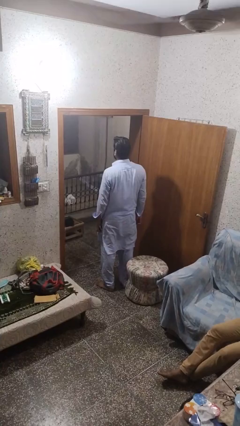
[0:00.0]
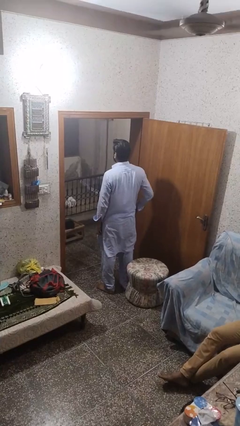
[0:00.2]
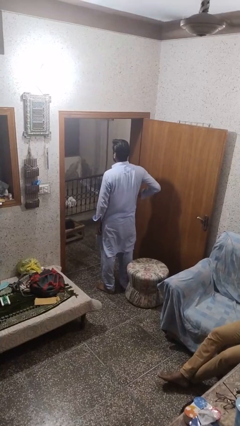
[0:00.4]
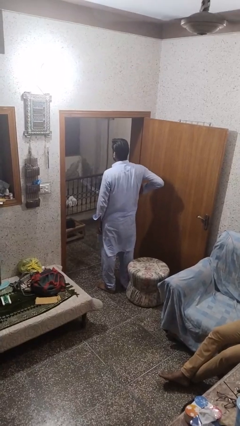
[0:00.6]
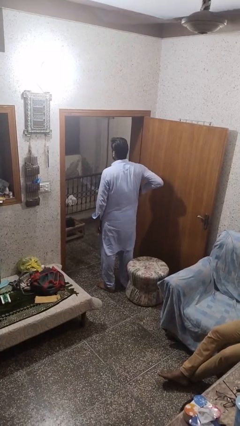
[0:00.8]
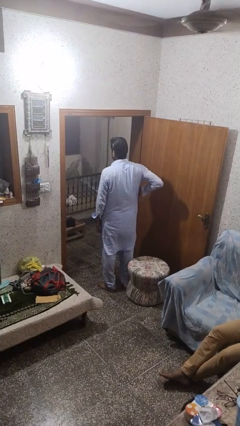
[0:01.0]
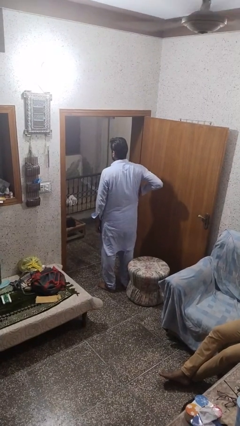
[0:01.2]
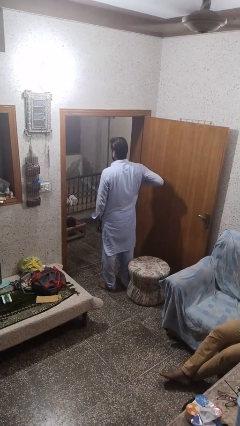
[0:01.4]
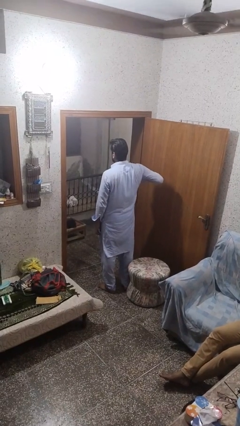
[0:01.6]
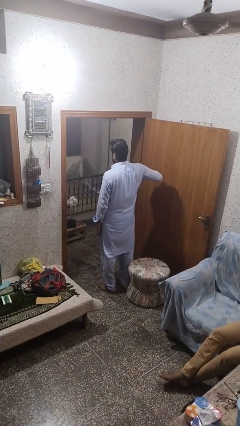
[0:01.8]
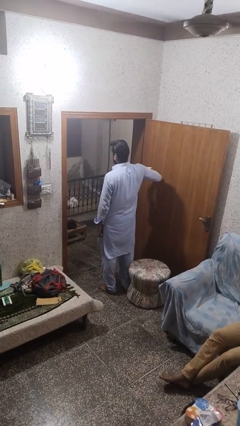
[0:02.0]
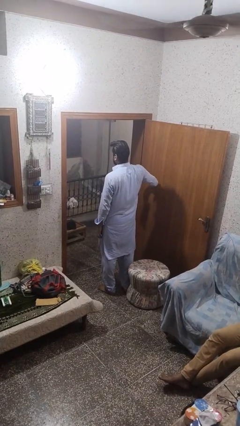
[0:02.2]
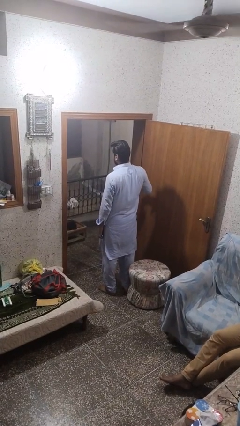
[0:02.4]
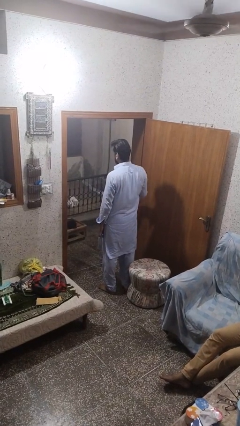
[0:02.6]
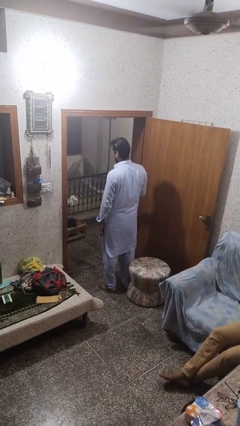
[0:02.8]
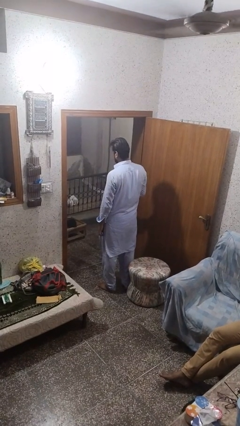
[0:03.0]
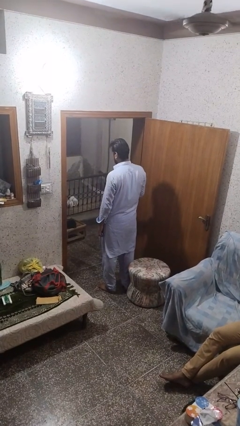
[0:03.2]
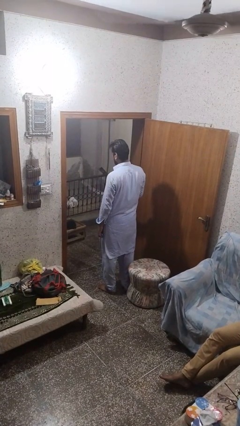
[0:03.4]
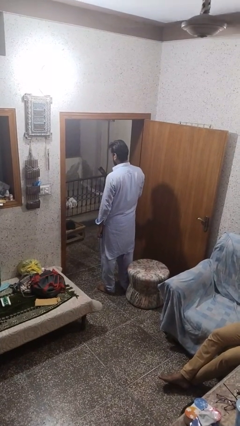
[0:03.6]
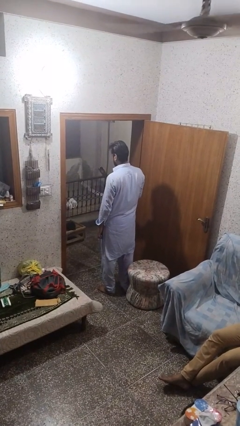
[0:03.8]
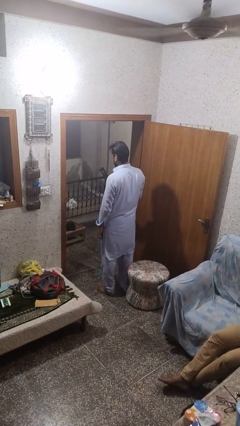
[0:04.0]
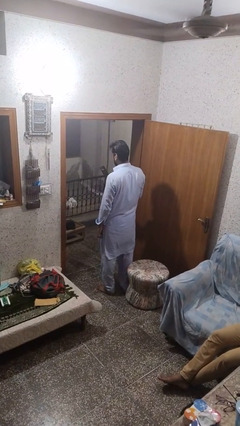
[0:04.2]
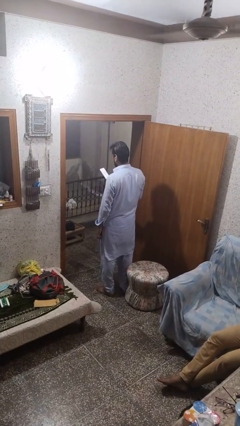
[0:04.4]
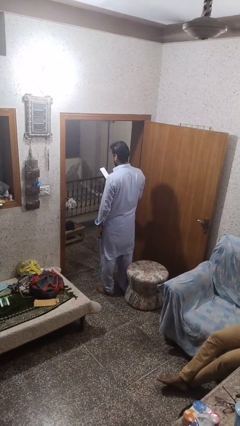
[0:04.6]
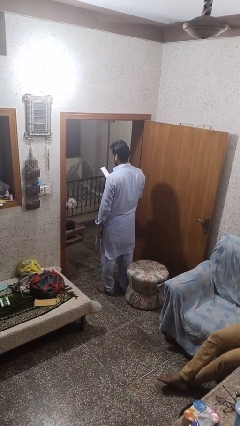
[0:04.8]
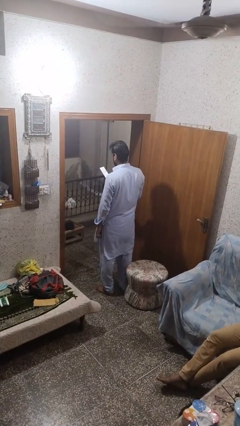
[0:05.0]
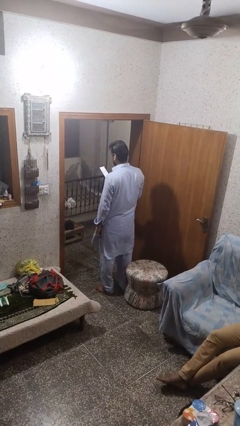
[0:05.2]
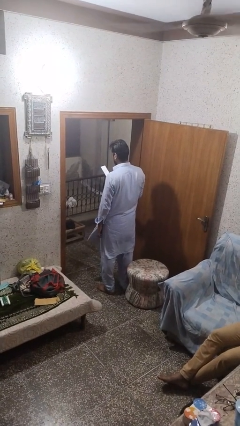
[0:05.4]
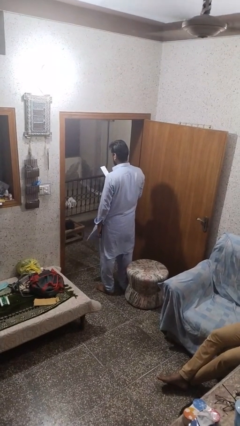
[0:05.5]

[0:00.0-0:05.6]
person takes phone from pocket

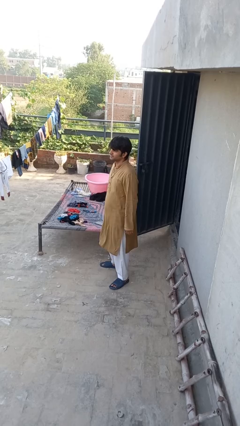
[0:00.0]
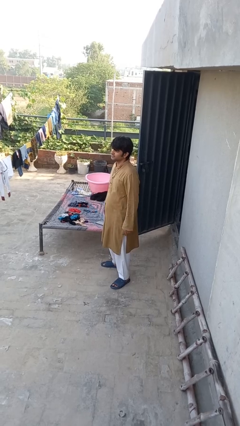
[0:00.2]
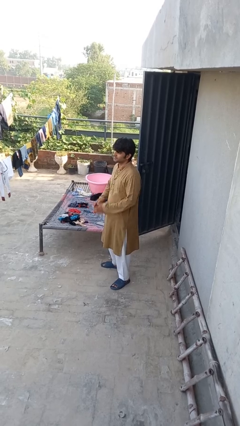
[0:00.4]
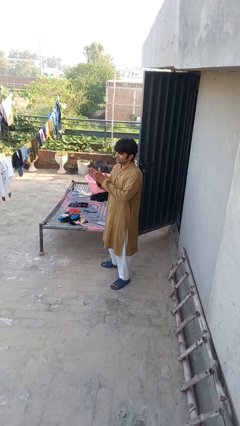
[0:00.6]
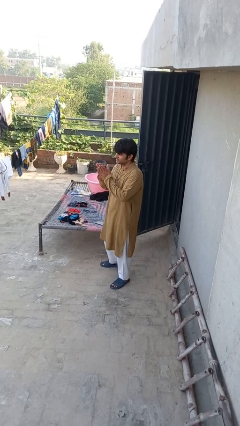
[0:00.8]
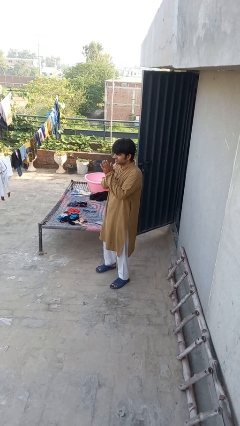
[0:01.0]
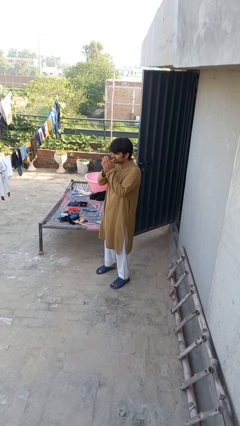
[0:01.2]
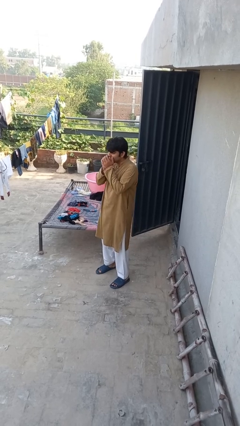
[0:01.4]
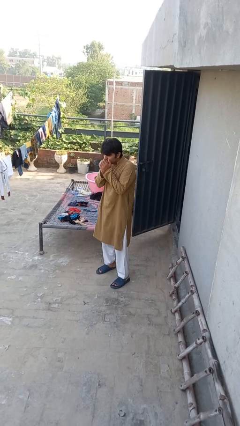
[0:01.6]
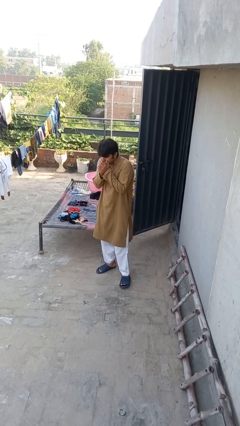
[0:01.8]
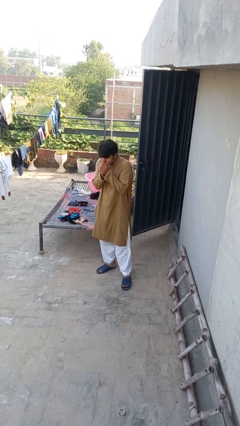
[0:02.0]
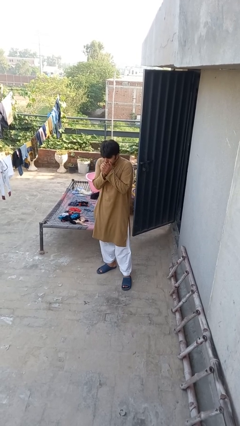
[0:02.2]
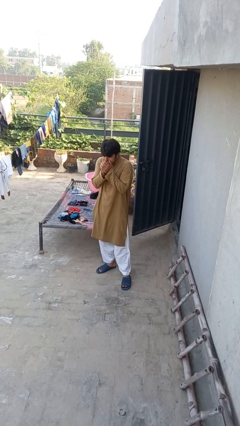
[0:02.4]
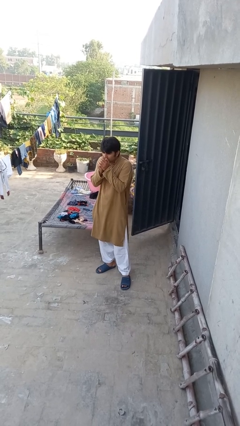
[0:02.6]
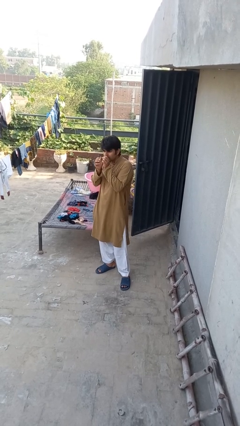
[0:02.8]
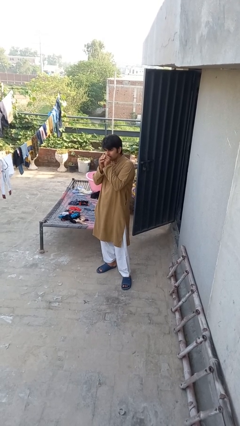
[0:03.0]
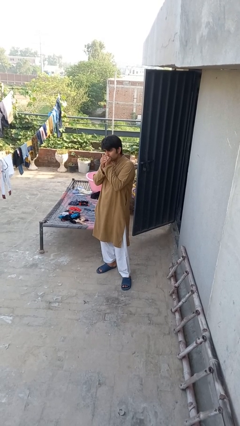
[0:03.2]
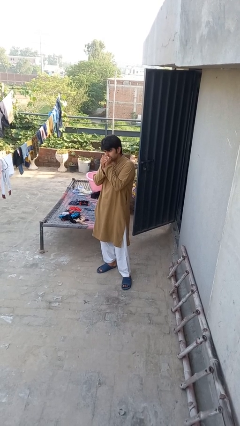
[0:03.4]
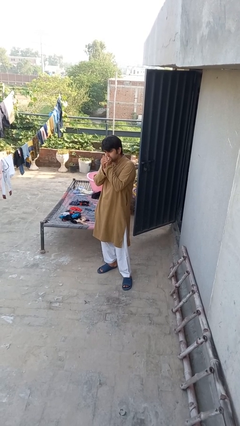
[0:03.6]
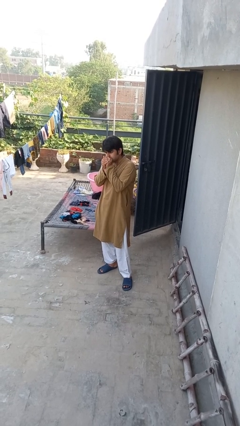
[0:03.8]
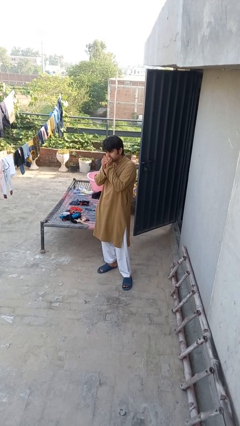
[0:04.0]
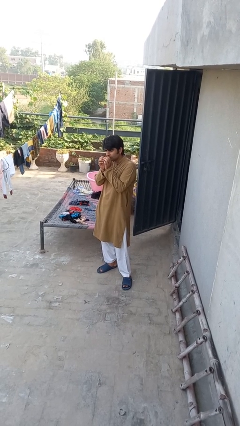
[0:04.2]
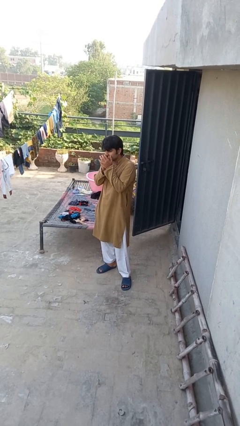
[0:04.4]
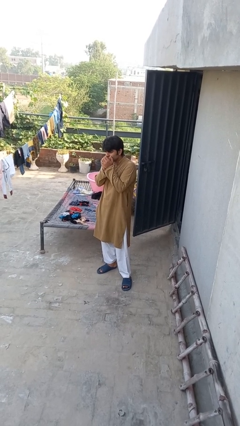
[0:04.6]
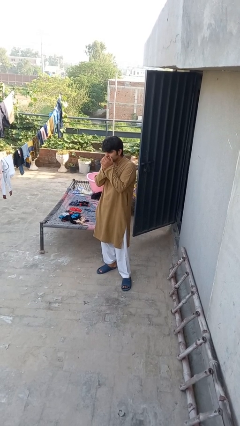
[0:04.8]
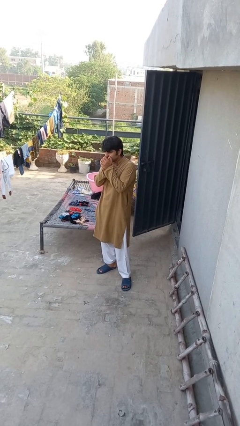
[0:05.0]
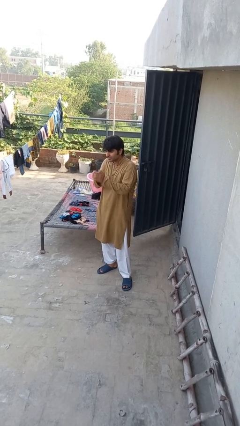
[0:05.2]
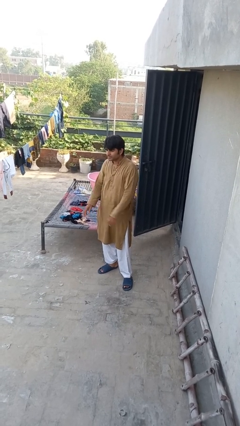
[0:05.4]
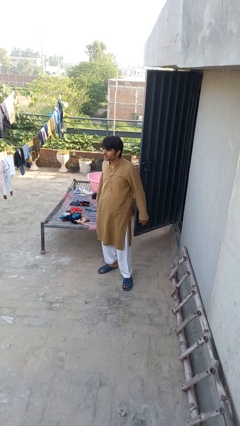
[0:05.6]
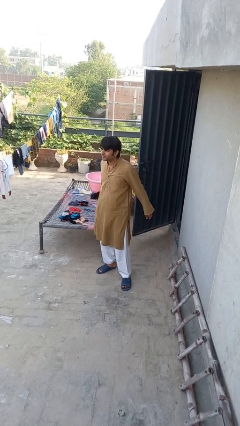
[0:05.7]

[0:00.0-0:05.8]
person blows into hands

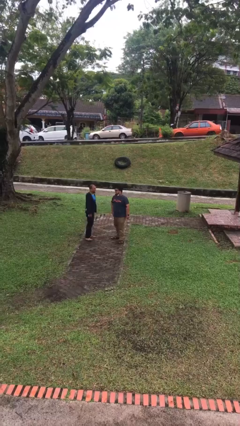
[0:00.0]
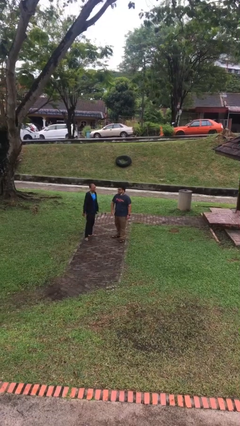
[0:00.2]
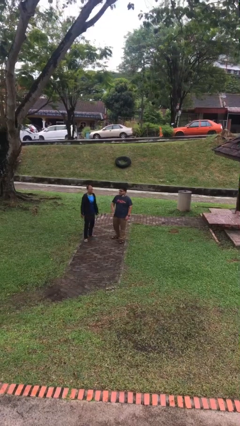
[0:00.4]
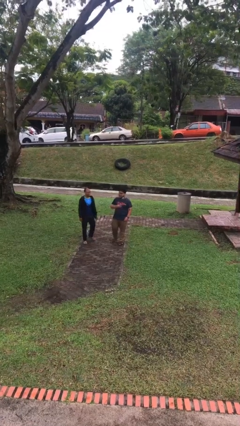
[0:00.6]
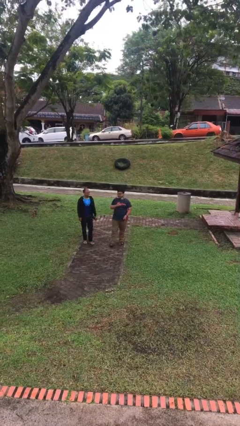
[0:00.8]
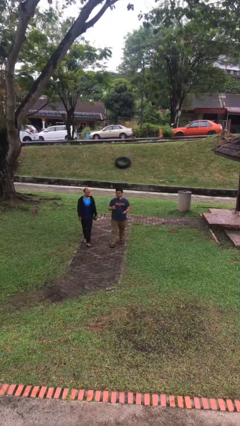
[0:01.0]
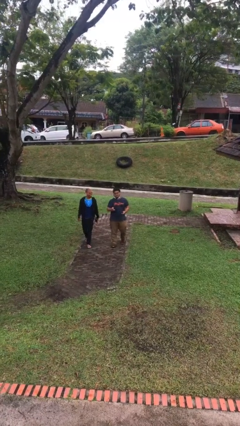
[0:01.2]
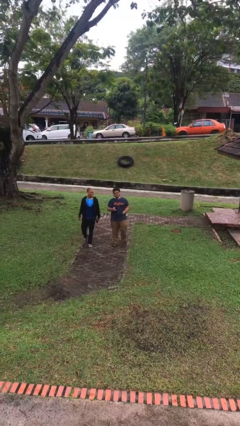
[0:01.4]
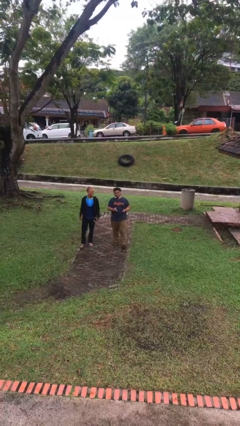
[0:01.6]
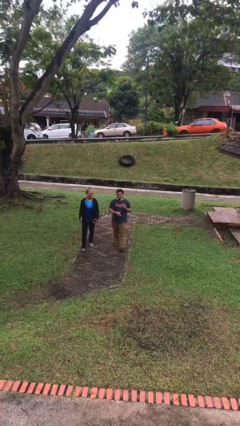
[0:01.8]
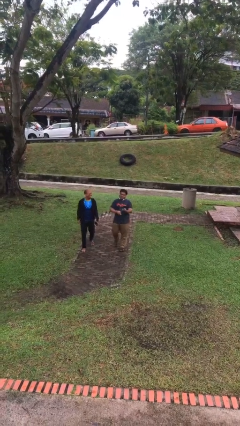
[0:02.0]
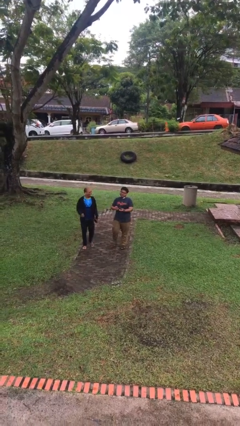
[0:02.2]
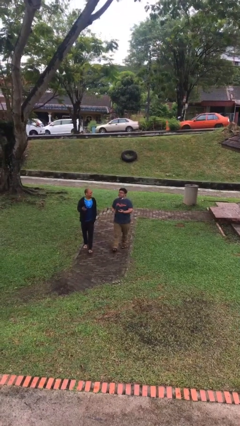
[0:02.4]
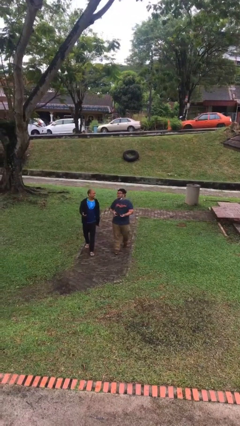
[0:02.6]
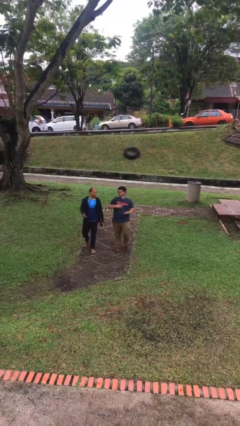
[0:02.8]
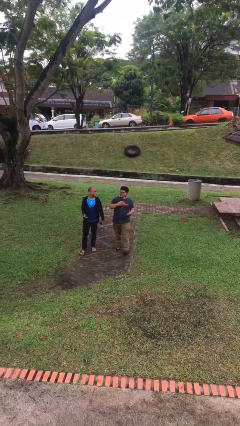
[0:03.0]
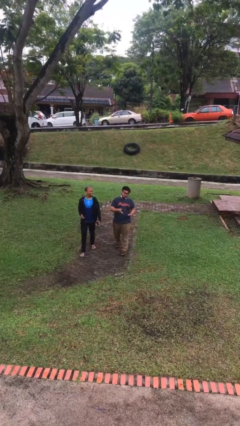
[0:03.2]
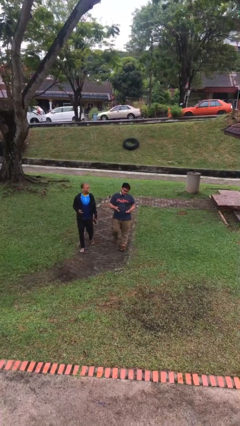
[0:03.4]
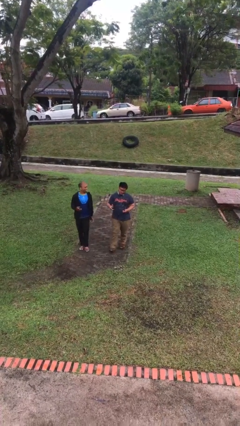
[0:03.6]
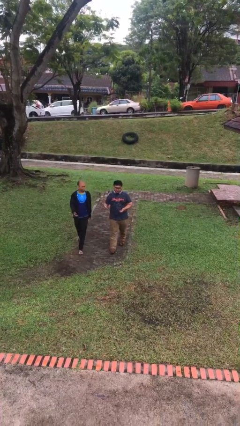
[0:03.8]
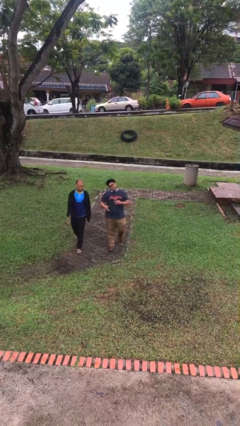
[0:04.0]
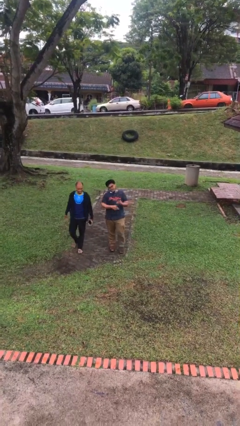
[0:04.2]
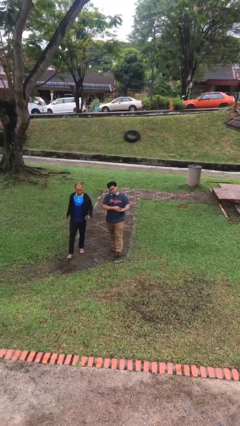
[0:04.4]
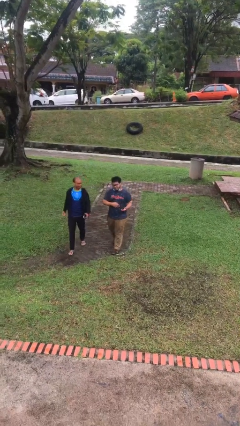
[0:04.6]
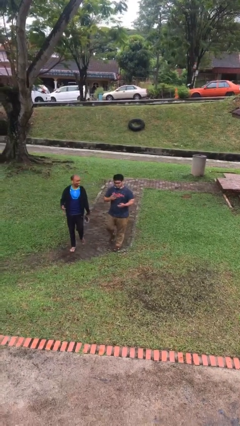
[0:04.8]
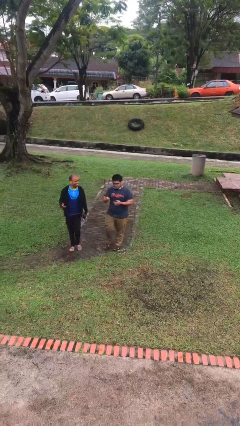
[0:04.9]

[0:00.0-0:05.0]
person talks to person

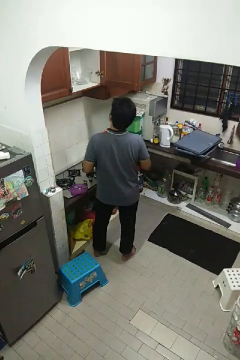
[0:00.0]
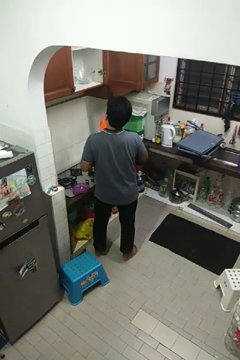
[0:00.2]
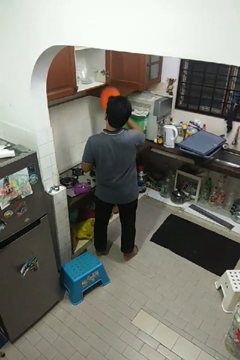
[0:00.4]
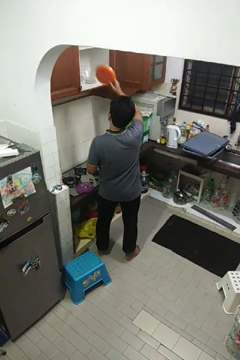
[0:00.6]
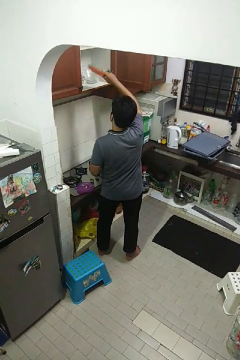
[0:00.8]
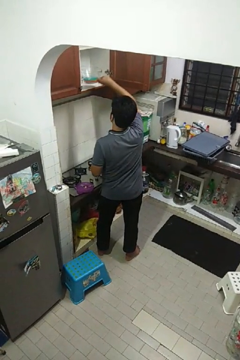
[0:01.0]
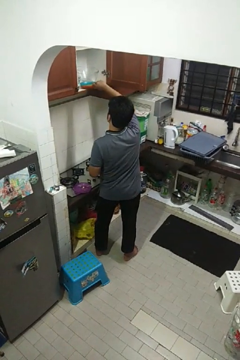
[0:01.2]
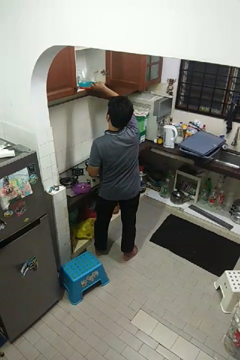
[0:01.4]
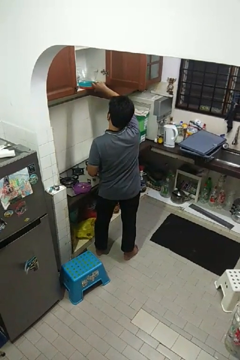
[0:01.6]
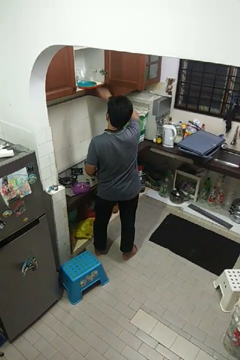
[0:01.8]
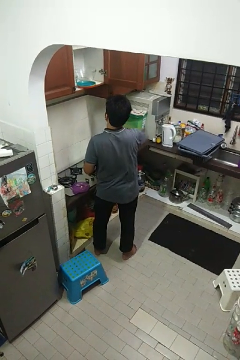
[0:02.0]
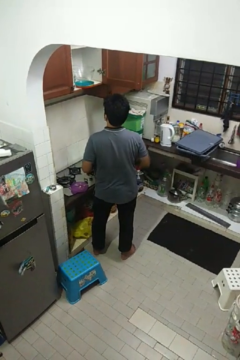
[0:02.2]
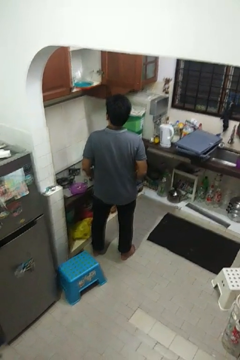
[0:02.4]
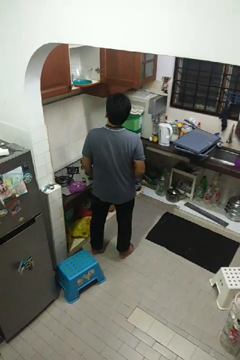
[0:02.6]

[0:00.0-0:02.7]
person puts object in cabinet
